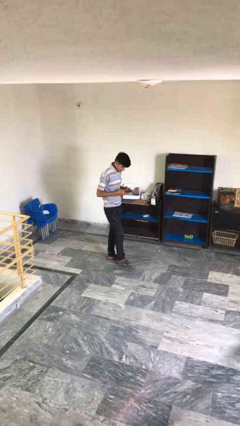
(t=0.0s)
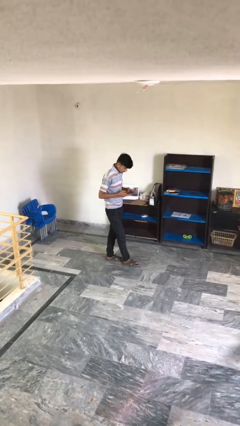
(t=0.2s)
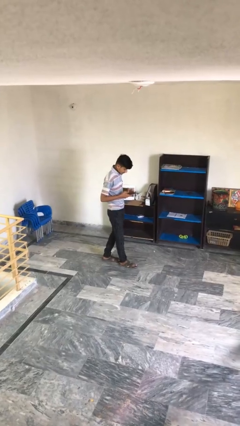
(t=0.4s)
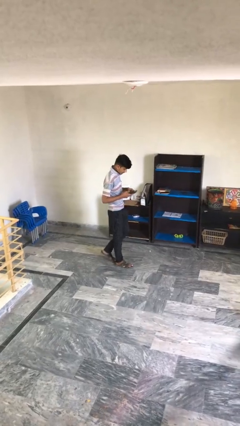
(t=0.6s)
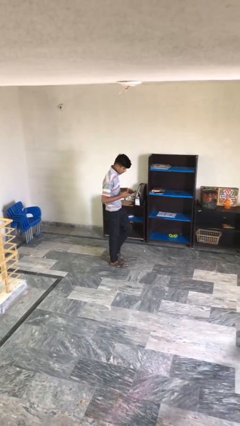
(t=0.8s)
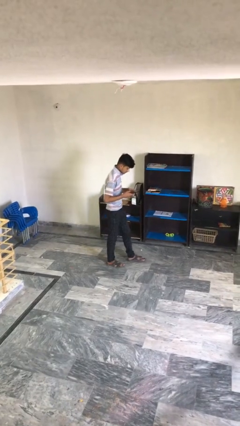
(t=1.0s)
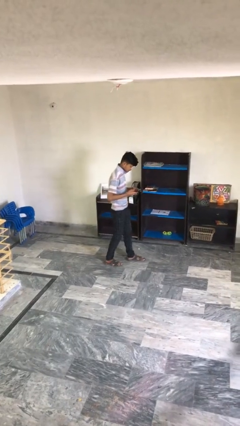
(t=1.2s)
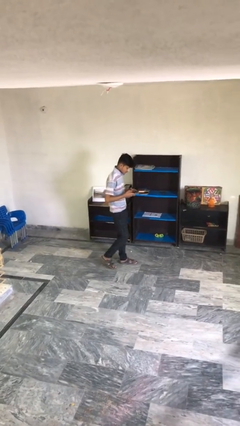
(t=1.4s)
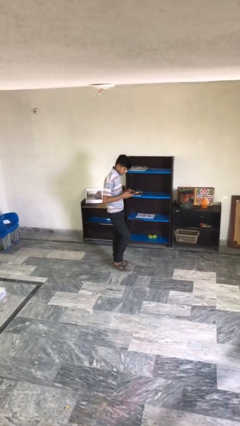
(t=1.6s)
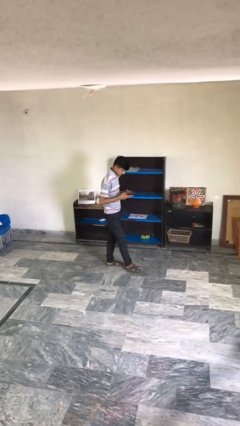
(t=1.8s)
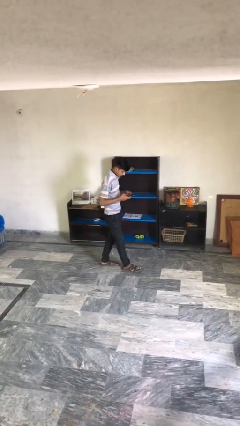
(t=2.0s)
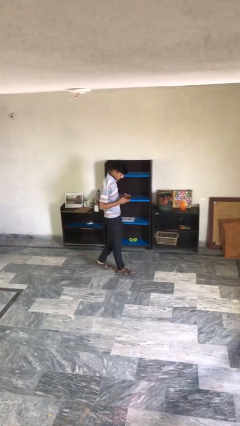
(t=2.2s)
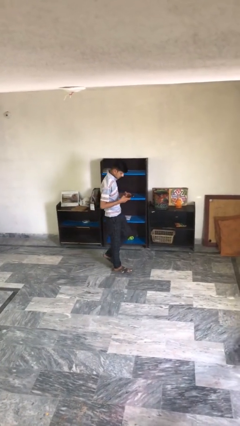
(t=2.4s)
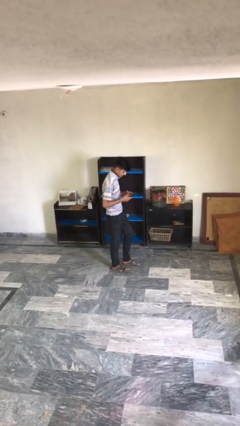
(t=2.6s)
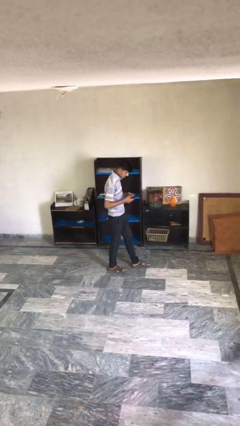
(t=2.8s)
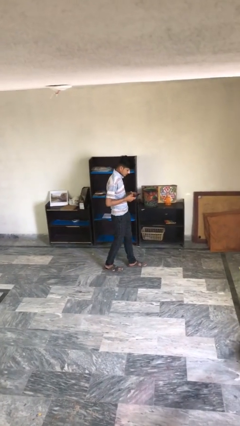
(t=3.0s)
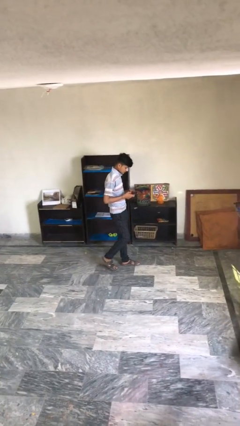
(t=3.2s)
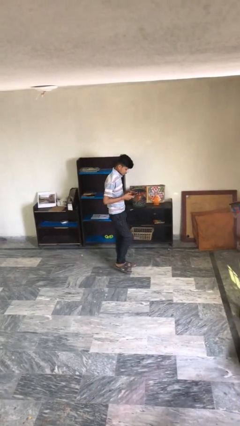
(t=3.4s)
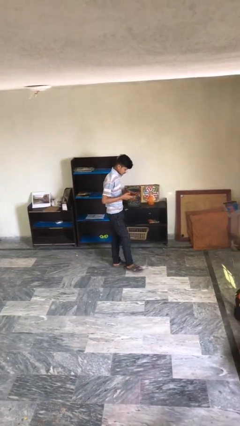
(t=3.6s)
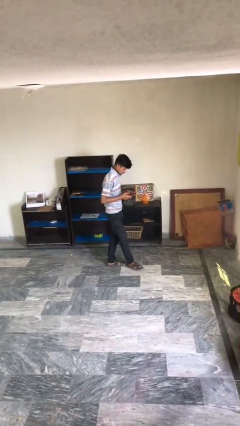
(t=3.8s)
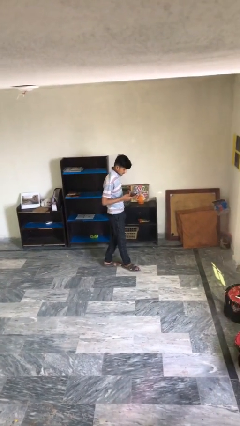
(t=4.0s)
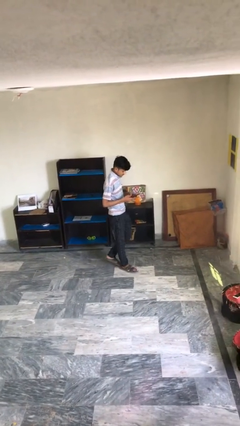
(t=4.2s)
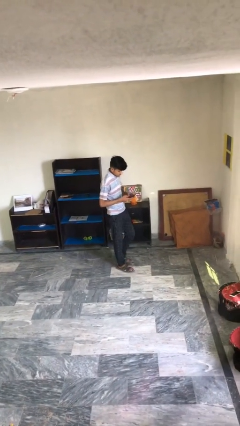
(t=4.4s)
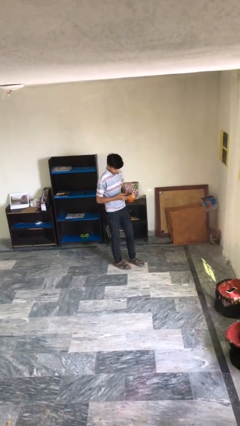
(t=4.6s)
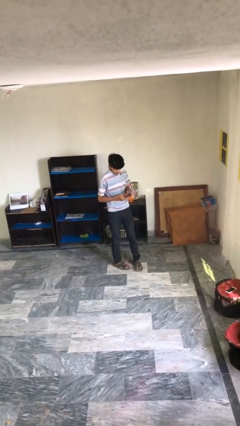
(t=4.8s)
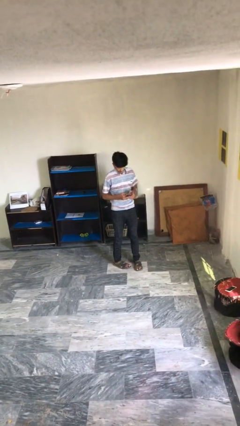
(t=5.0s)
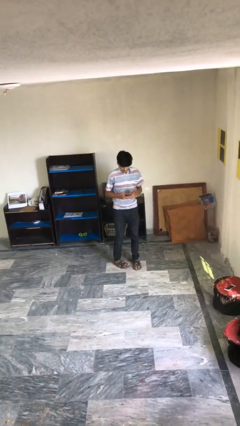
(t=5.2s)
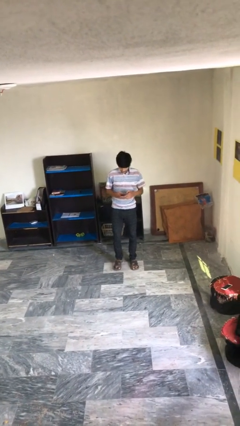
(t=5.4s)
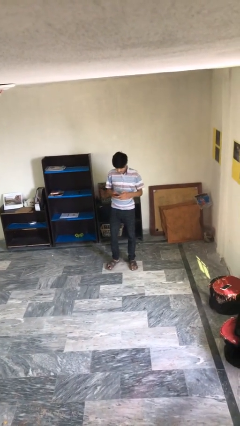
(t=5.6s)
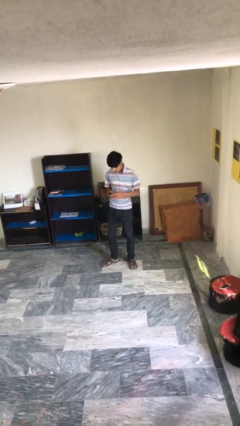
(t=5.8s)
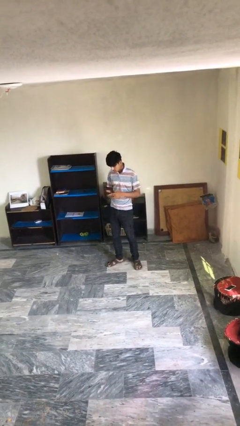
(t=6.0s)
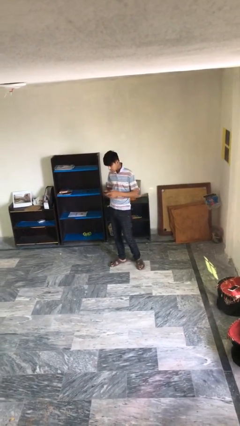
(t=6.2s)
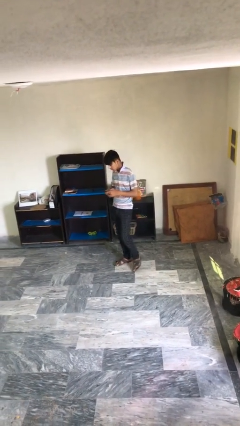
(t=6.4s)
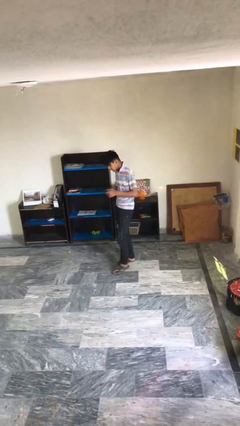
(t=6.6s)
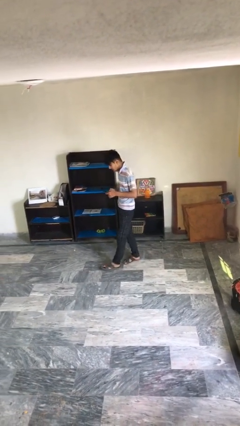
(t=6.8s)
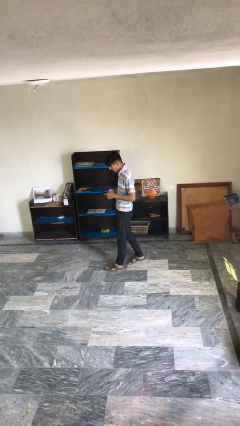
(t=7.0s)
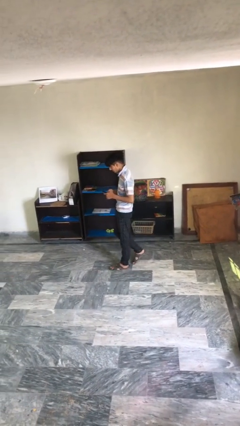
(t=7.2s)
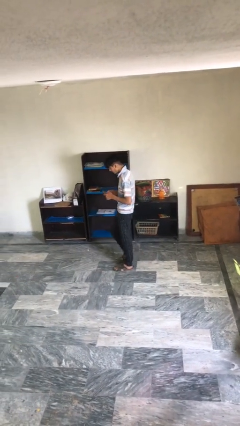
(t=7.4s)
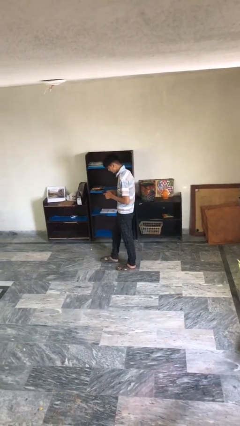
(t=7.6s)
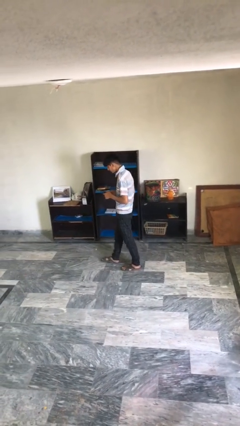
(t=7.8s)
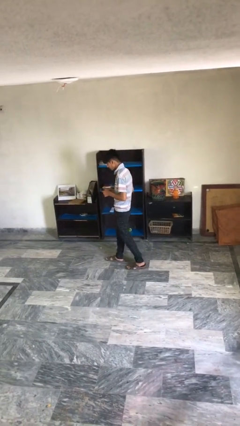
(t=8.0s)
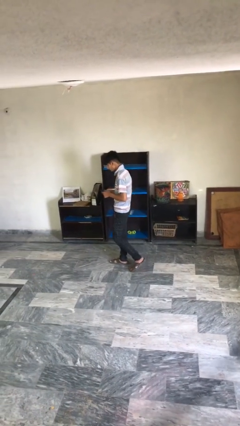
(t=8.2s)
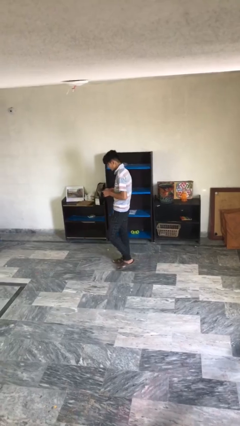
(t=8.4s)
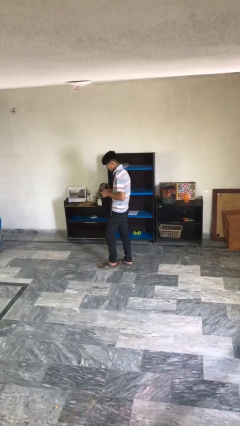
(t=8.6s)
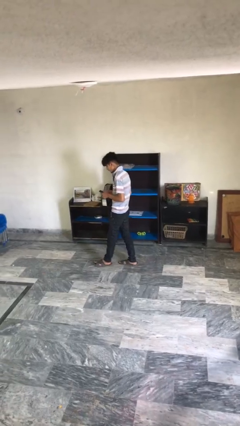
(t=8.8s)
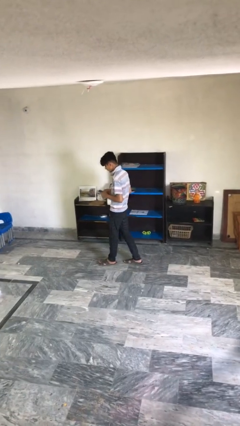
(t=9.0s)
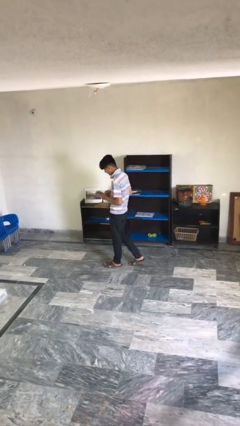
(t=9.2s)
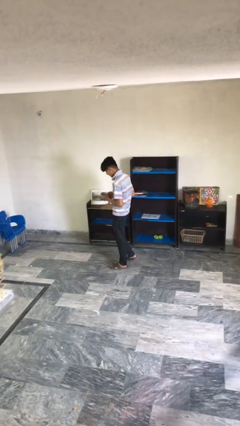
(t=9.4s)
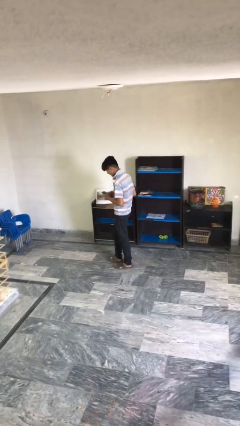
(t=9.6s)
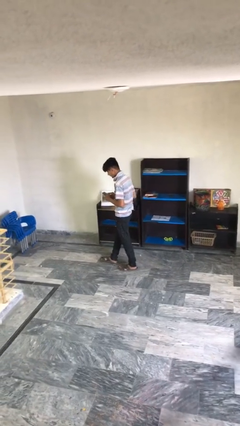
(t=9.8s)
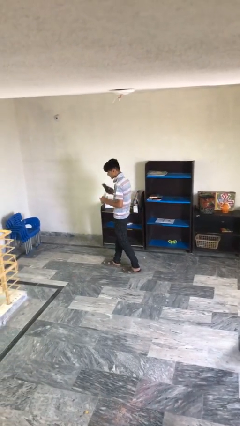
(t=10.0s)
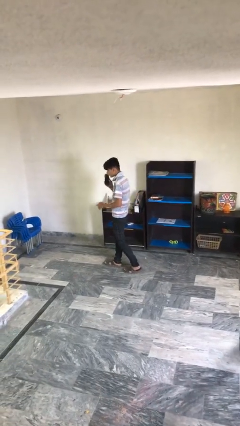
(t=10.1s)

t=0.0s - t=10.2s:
person texts on phone

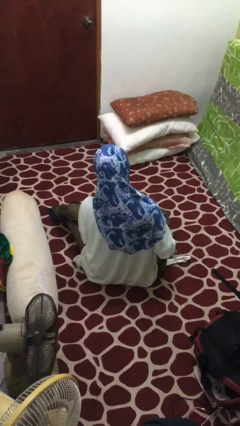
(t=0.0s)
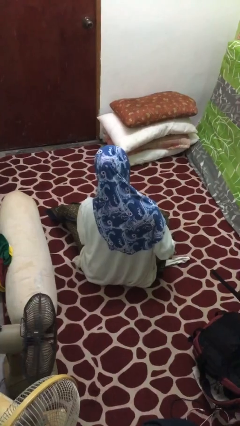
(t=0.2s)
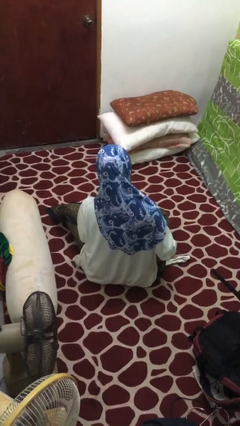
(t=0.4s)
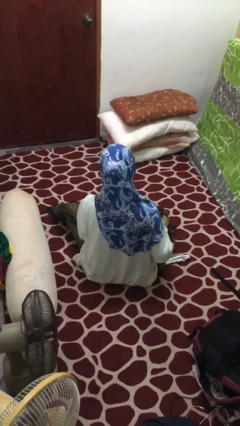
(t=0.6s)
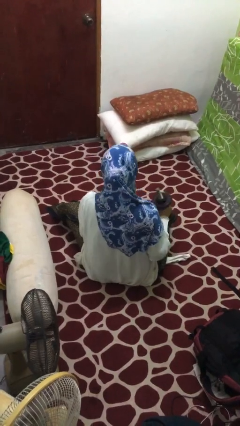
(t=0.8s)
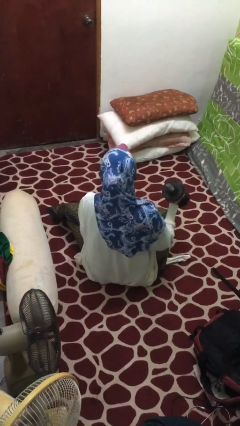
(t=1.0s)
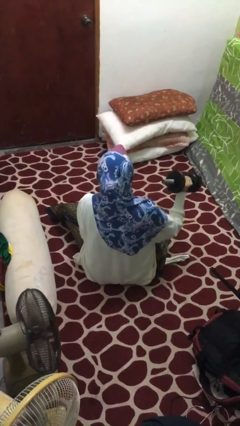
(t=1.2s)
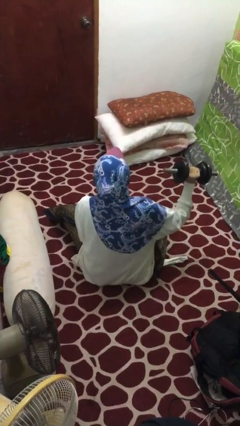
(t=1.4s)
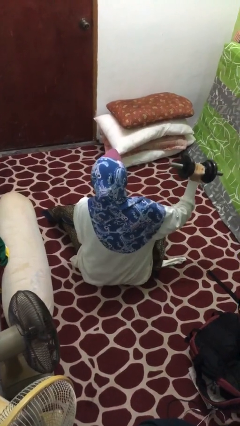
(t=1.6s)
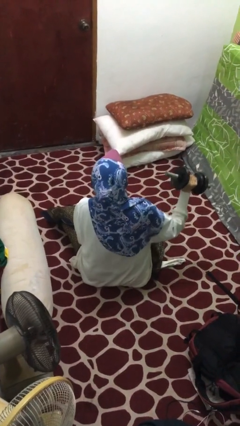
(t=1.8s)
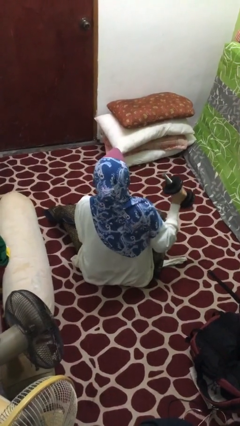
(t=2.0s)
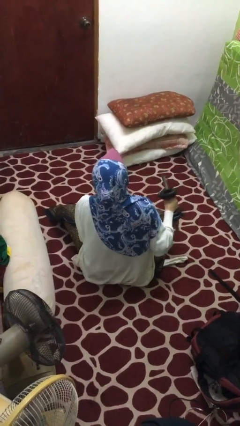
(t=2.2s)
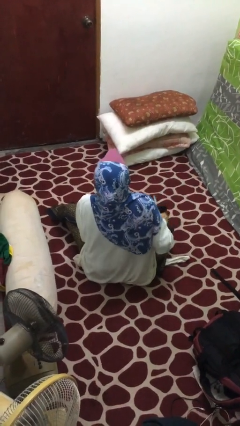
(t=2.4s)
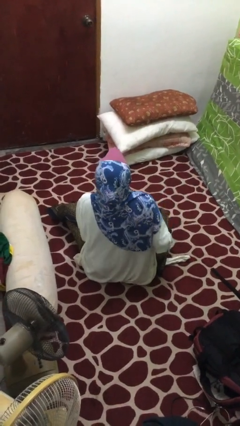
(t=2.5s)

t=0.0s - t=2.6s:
person lifts dumbbells

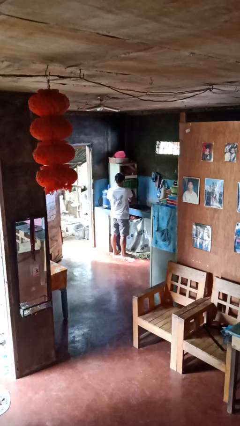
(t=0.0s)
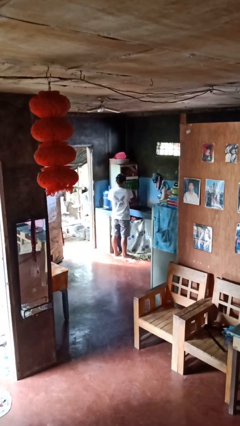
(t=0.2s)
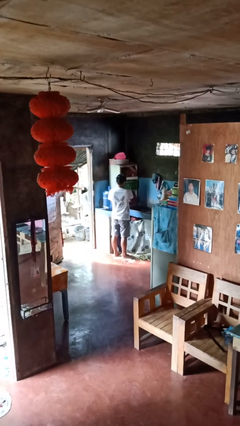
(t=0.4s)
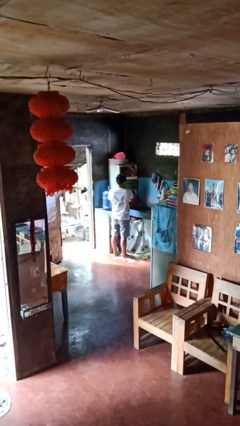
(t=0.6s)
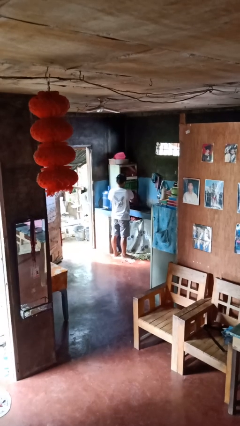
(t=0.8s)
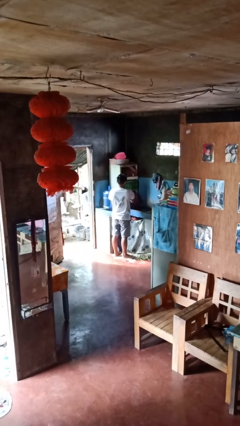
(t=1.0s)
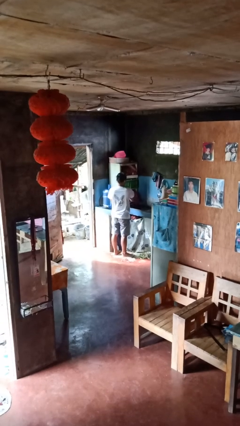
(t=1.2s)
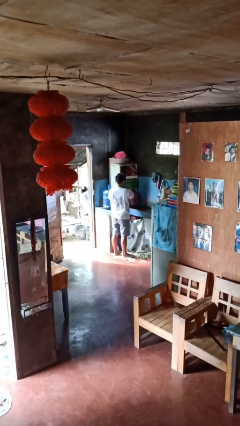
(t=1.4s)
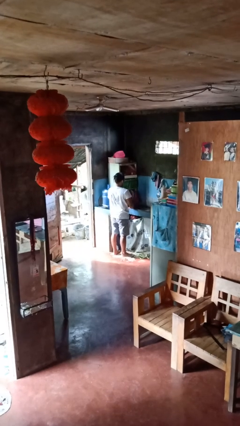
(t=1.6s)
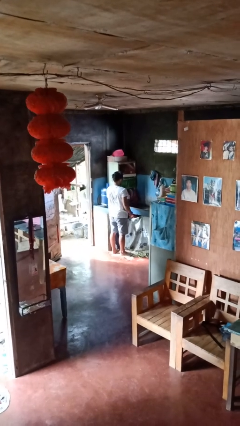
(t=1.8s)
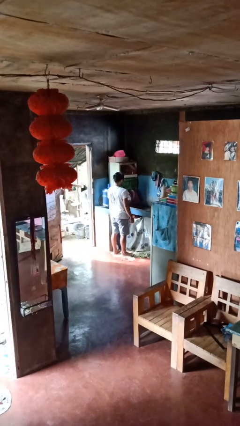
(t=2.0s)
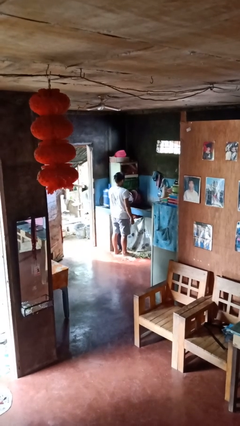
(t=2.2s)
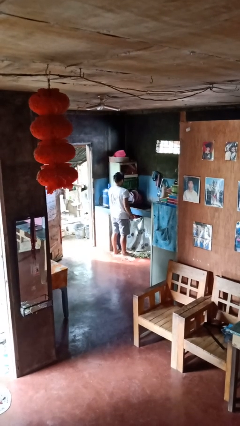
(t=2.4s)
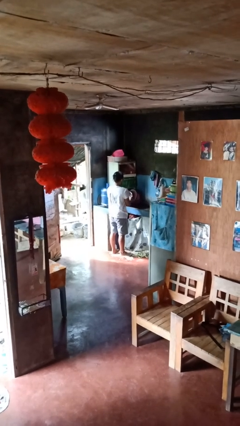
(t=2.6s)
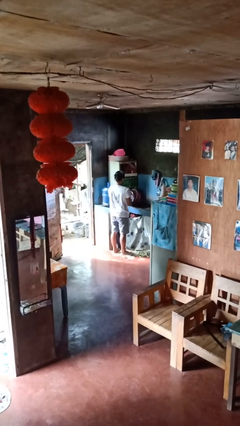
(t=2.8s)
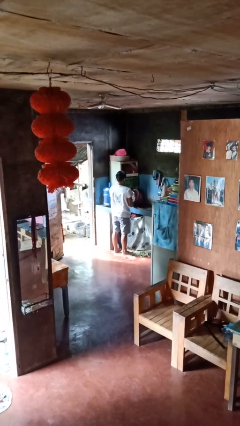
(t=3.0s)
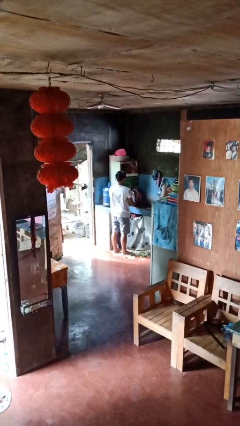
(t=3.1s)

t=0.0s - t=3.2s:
person opens dishwasher

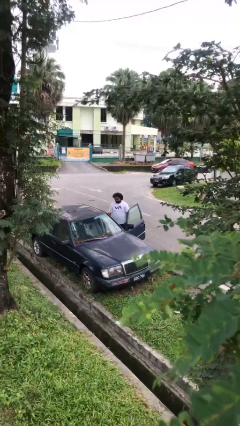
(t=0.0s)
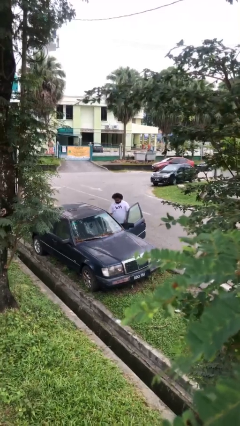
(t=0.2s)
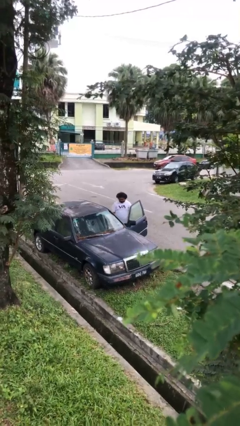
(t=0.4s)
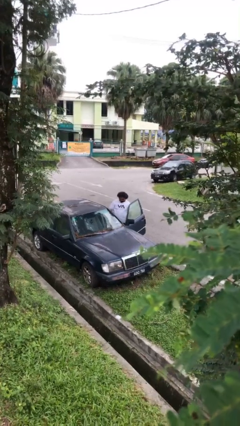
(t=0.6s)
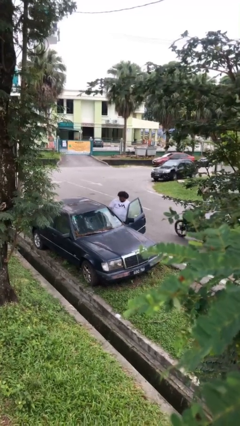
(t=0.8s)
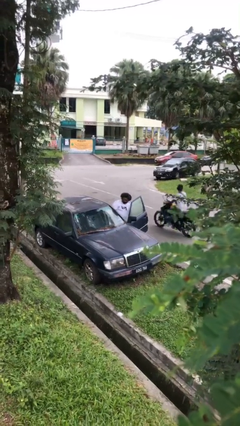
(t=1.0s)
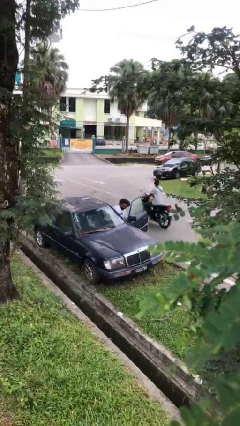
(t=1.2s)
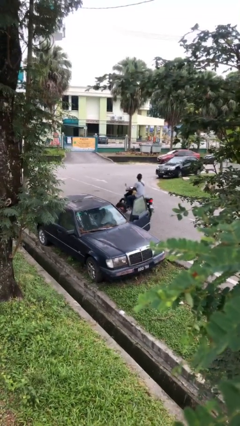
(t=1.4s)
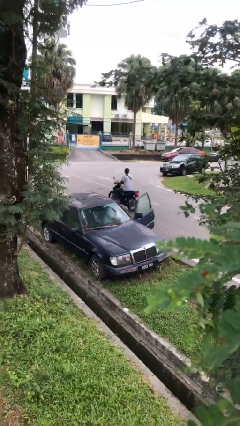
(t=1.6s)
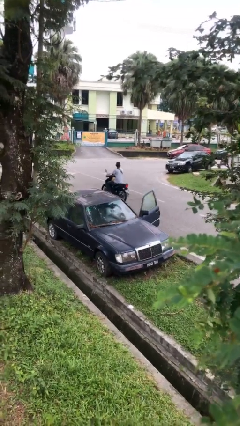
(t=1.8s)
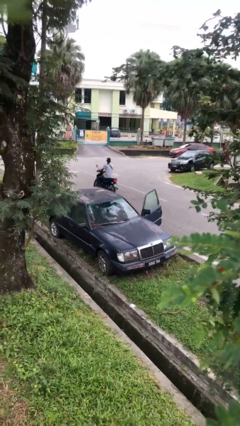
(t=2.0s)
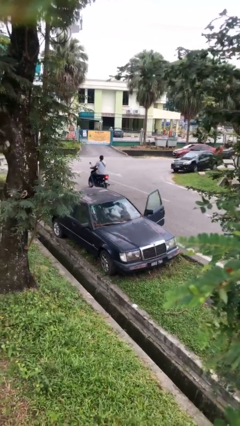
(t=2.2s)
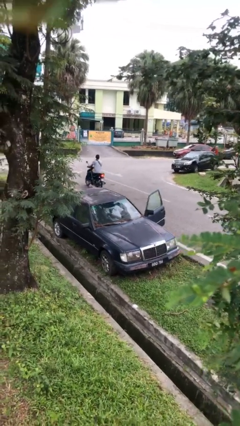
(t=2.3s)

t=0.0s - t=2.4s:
person enters car
